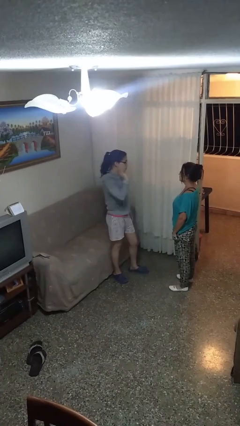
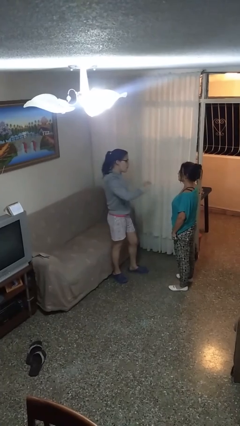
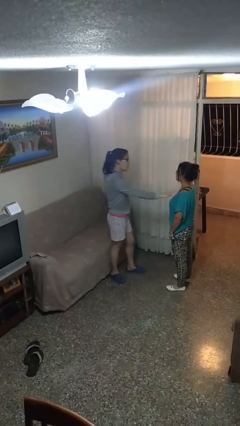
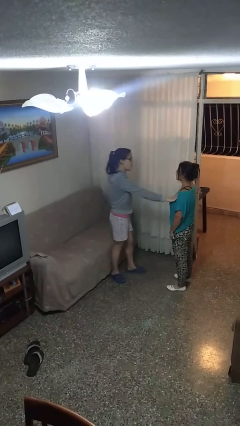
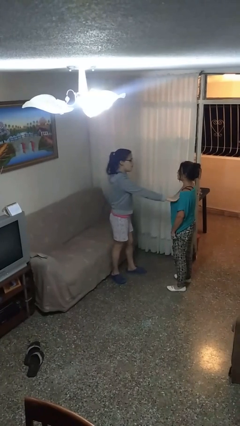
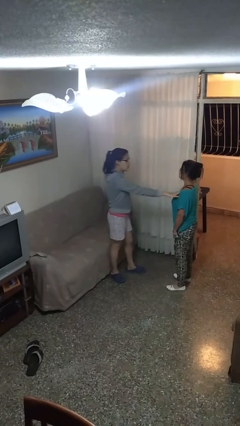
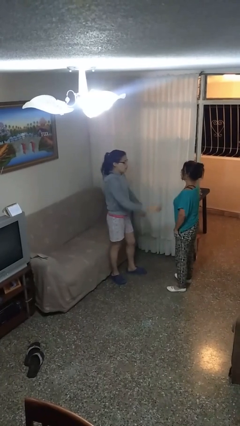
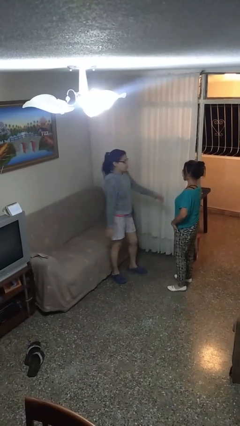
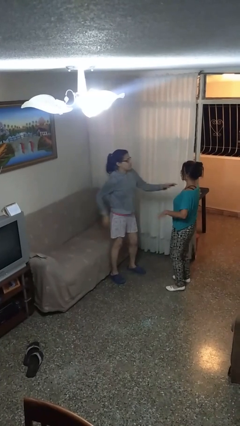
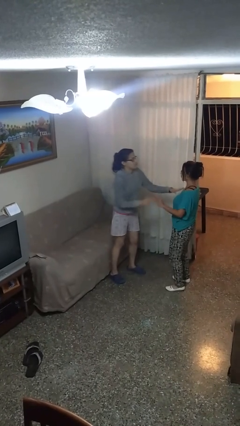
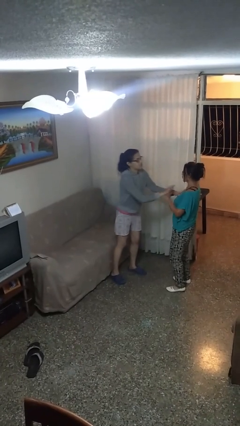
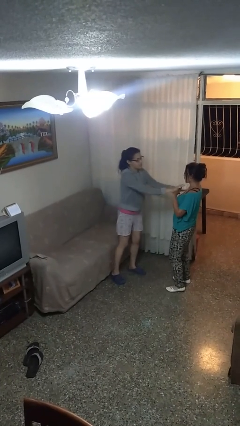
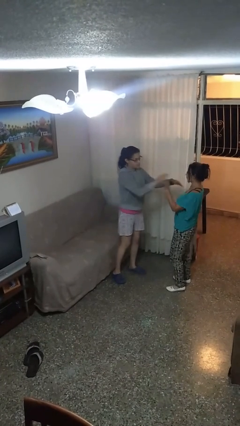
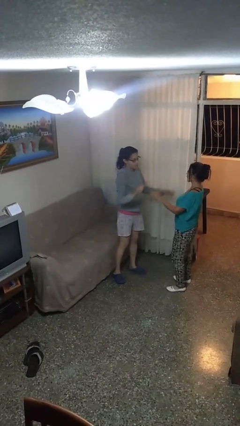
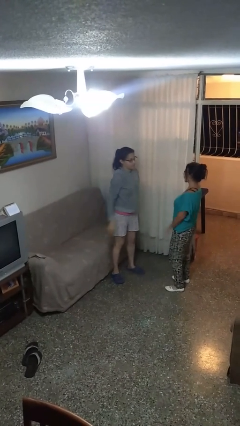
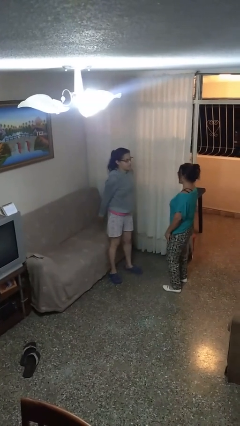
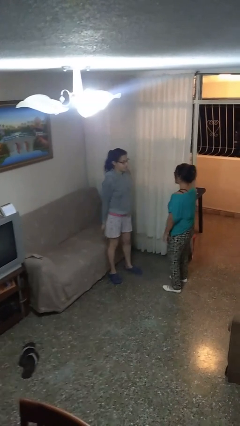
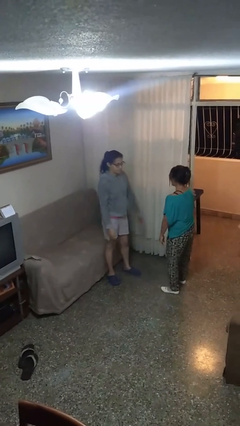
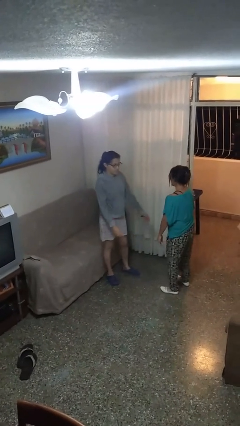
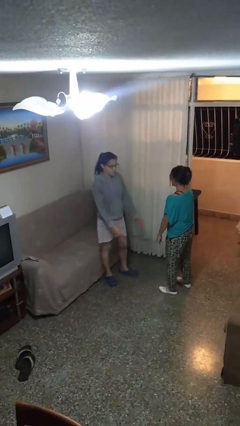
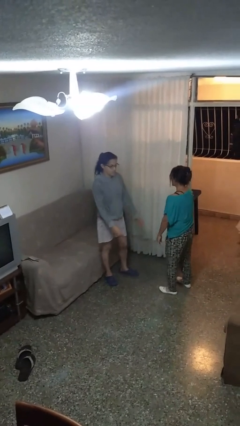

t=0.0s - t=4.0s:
person shoves person

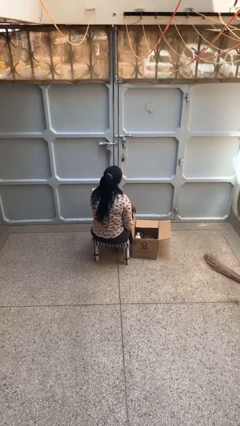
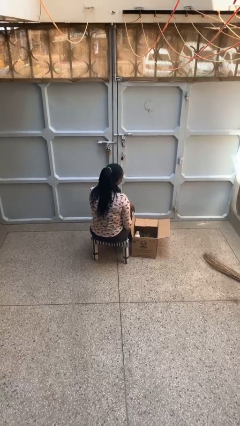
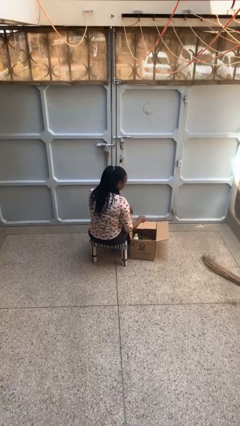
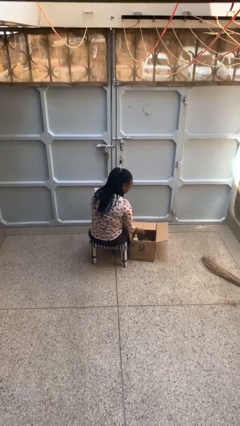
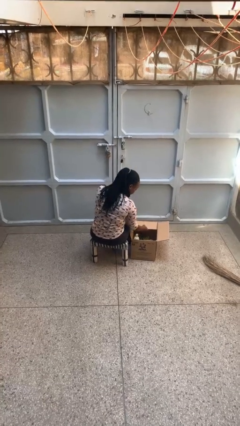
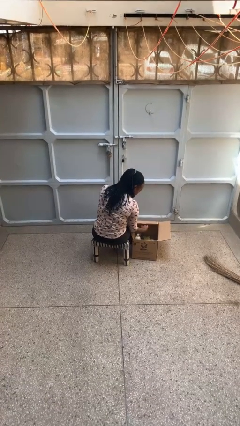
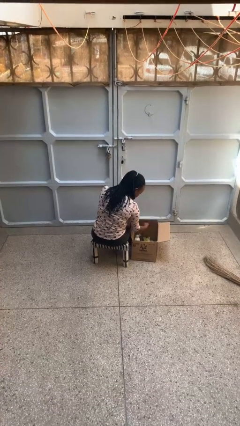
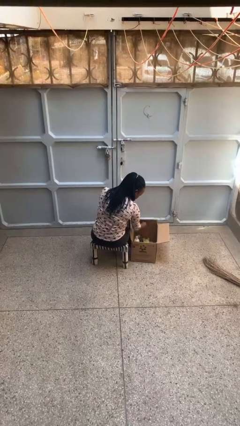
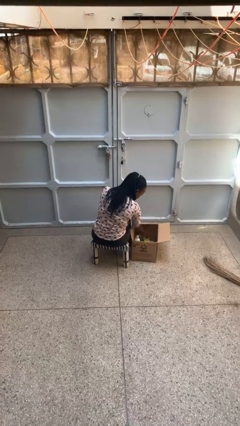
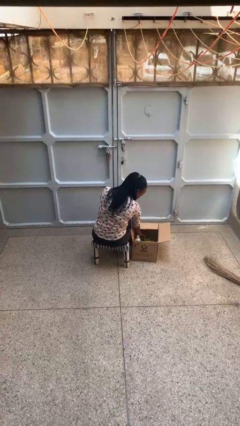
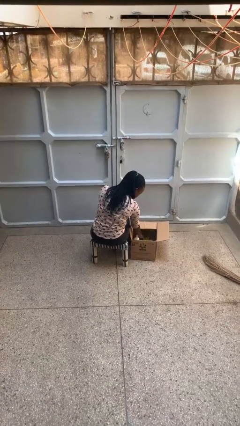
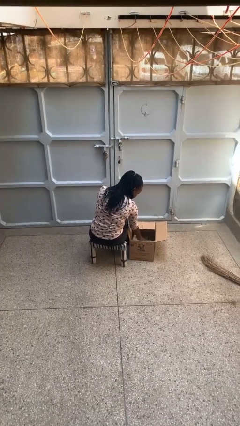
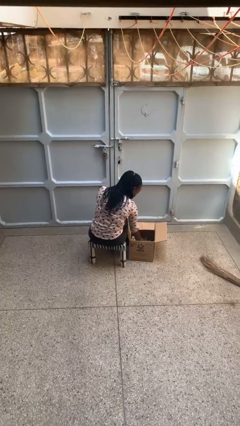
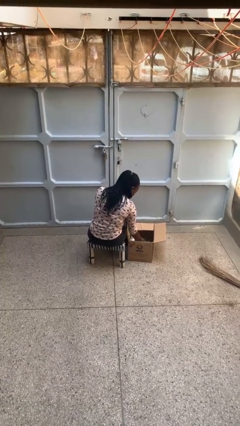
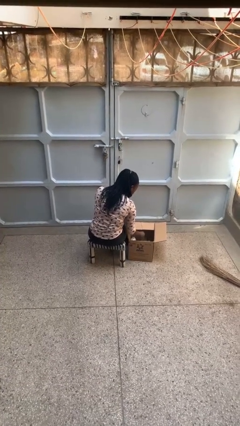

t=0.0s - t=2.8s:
person searches in box

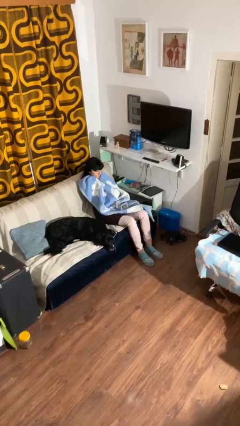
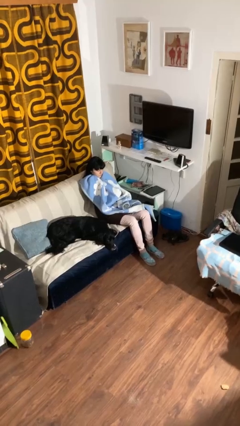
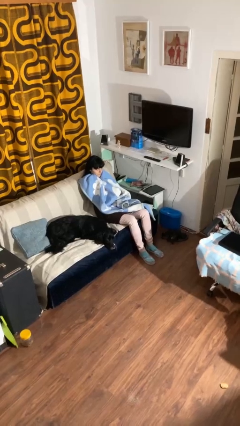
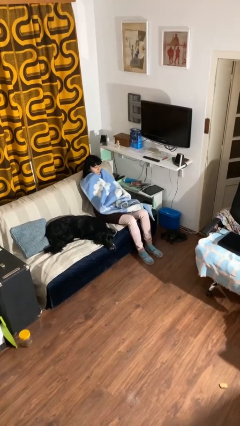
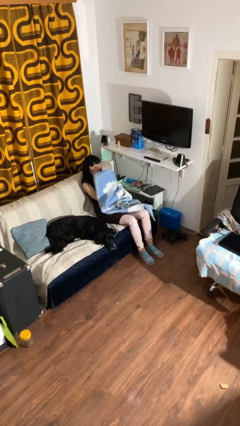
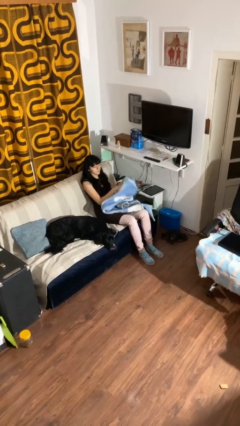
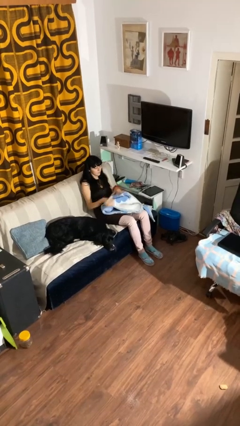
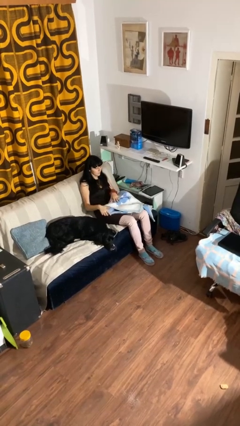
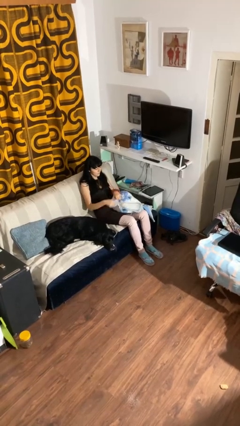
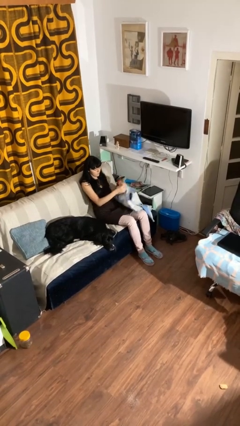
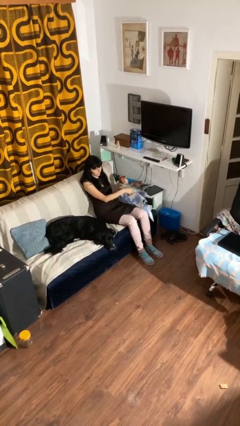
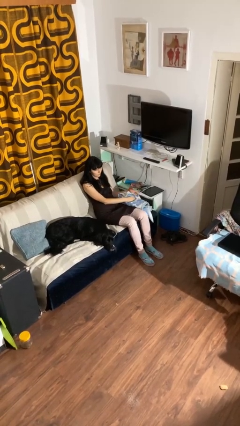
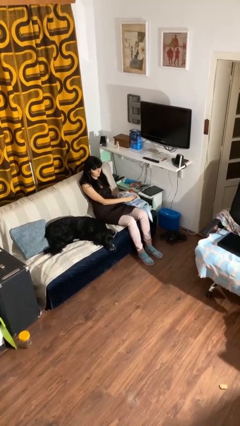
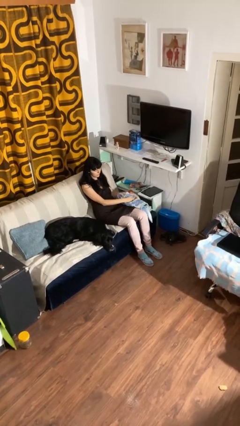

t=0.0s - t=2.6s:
person uncovers with blanket

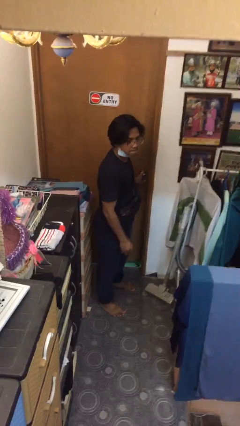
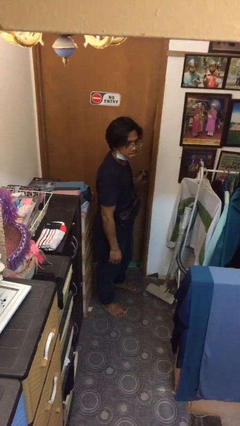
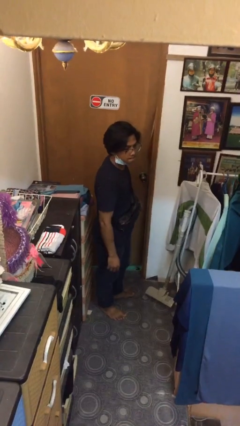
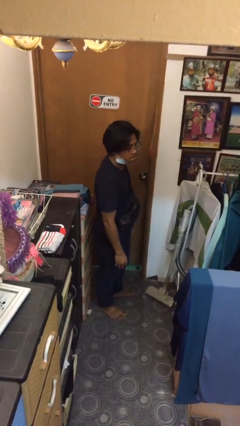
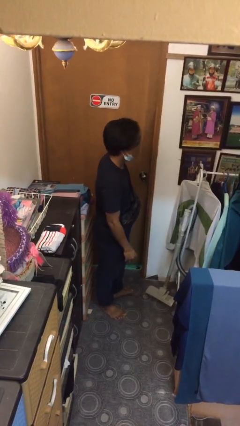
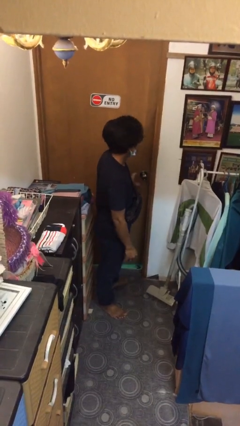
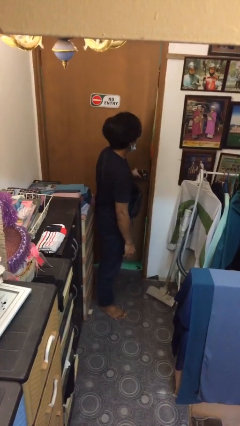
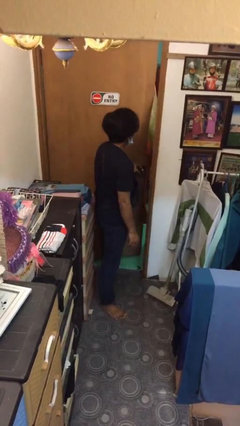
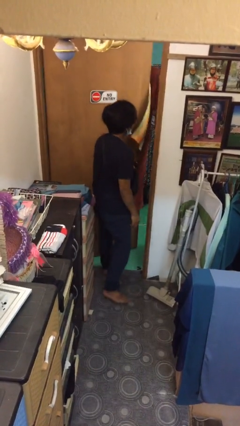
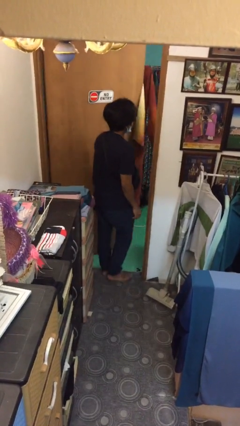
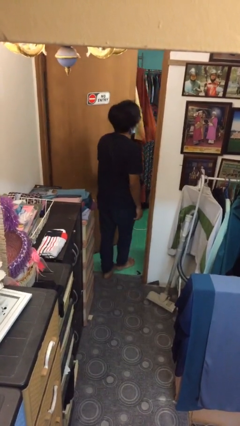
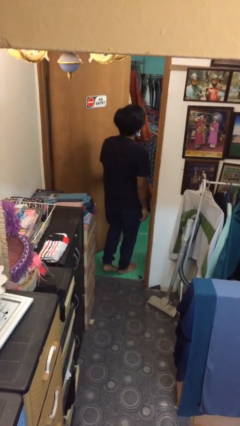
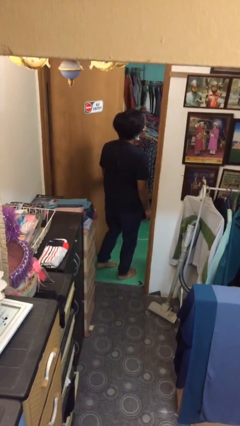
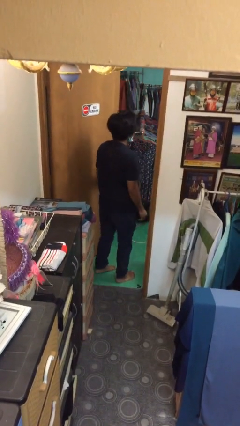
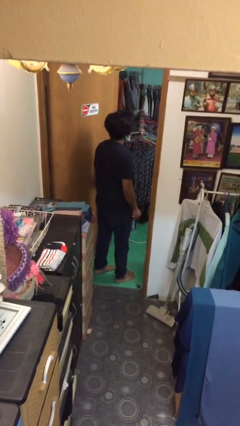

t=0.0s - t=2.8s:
person opens facility door

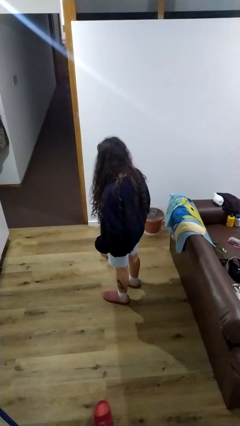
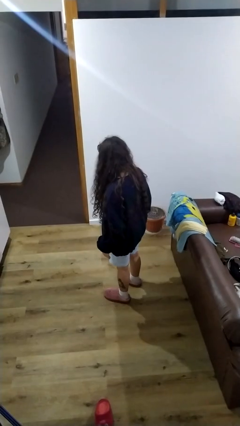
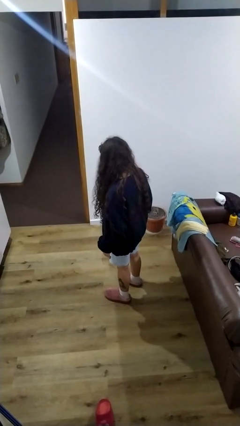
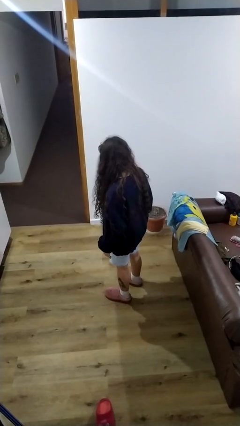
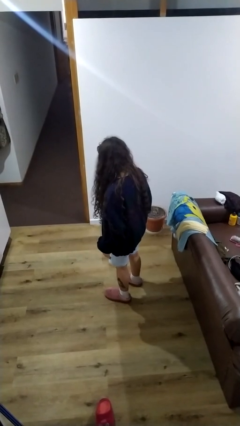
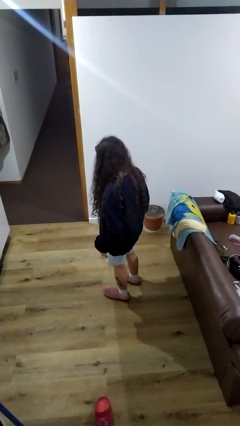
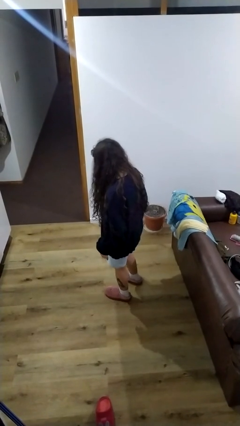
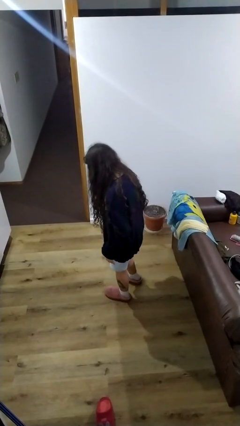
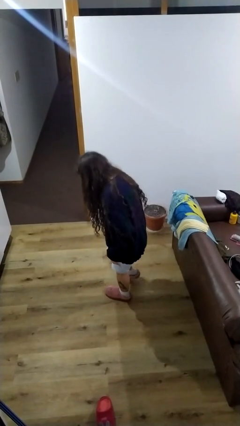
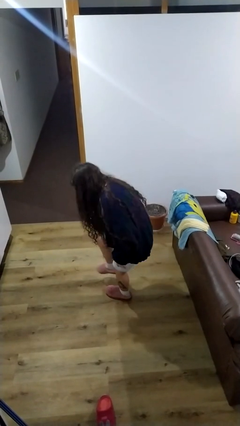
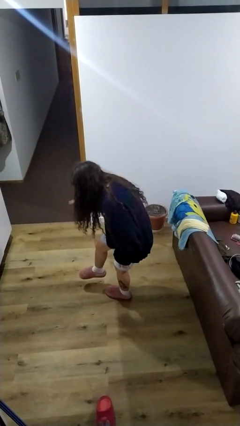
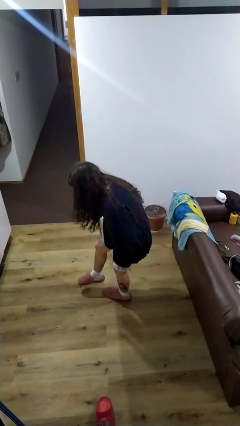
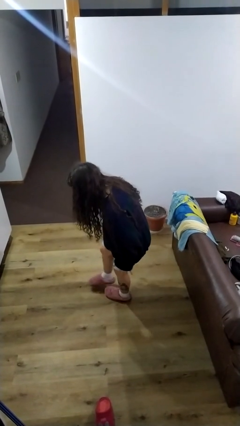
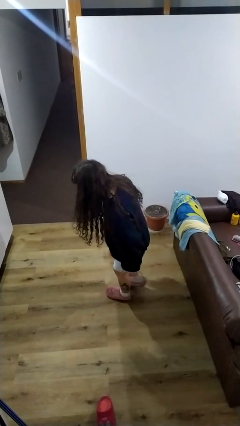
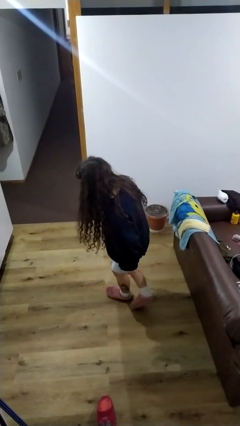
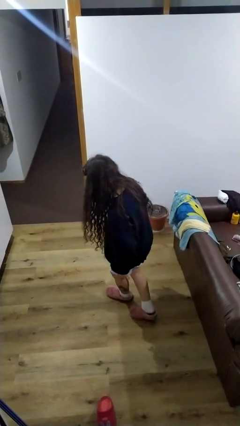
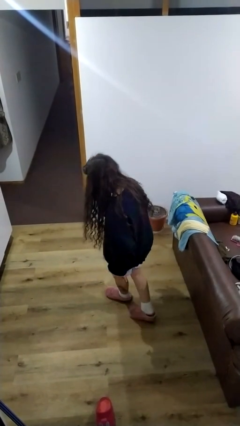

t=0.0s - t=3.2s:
person swats bug

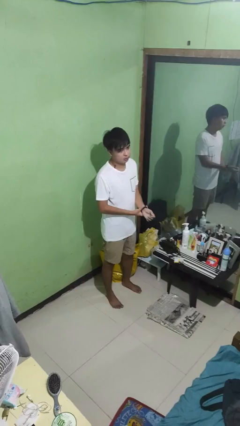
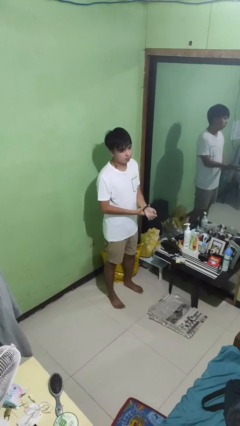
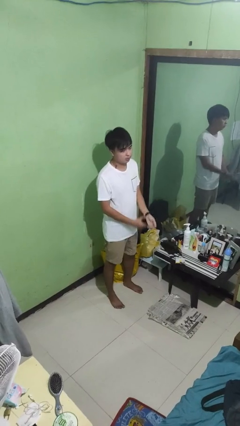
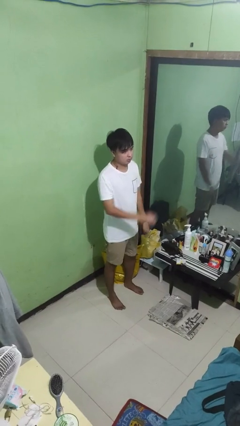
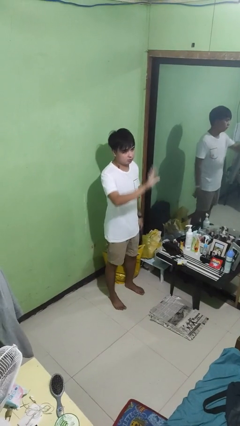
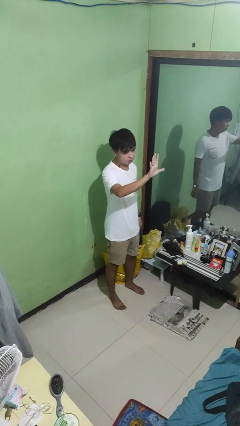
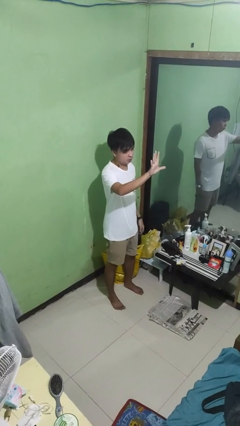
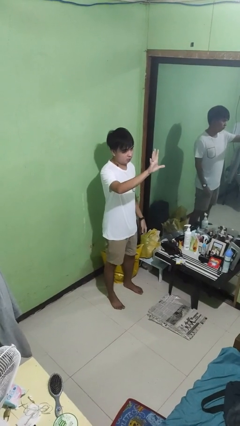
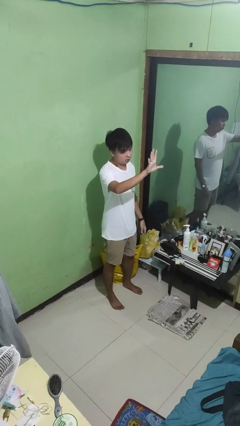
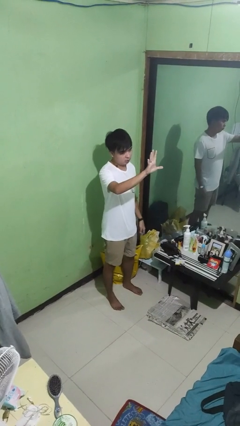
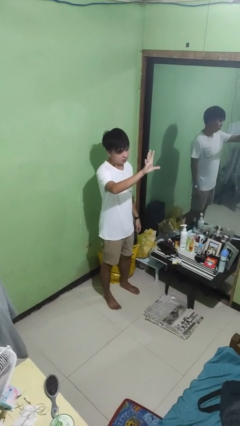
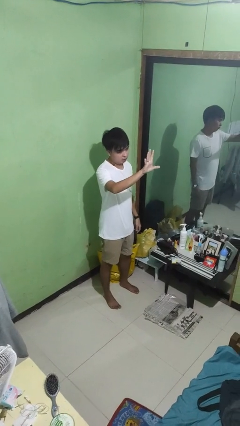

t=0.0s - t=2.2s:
person gestures number five

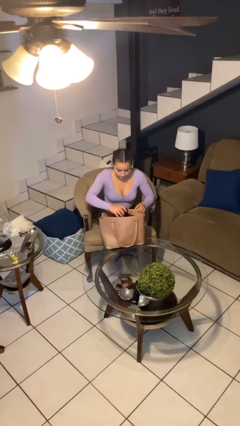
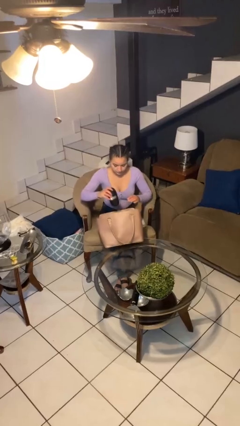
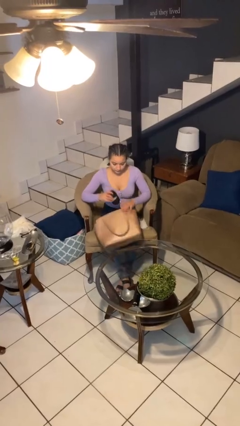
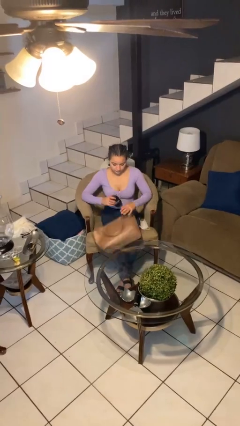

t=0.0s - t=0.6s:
person takes object from purse
